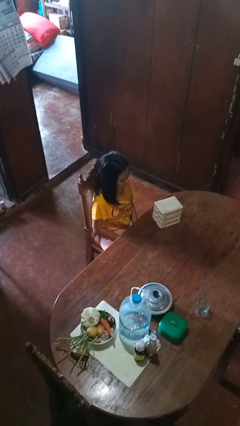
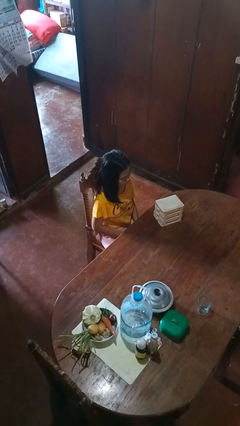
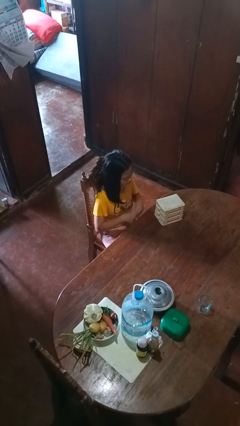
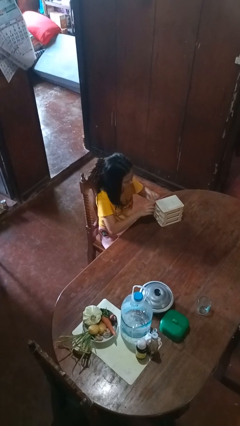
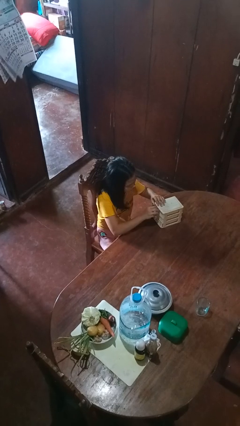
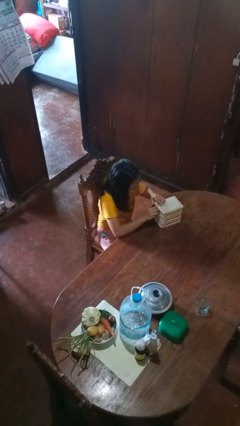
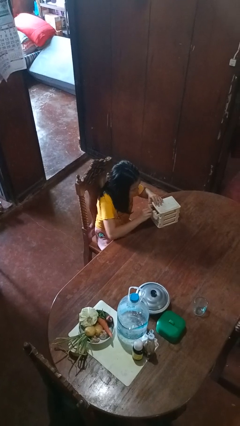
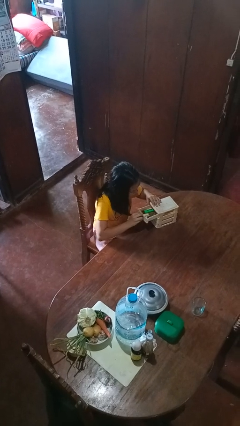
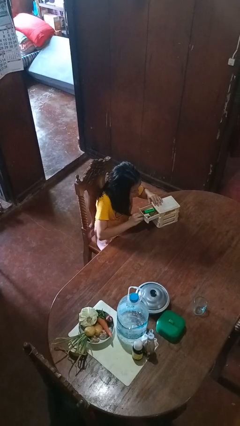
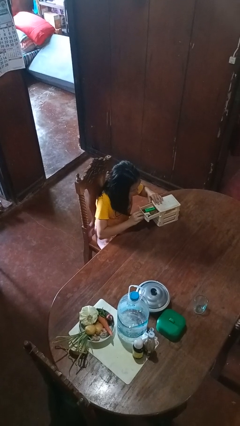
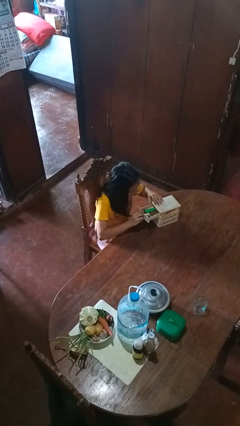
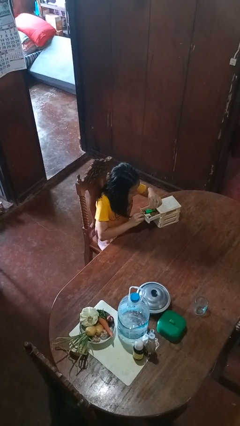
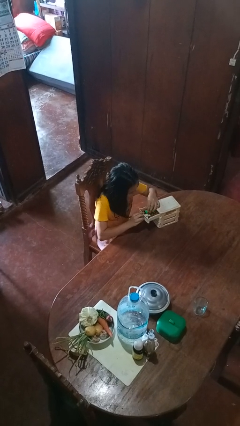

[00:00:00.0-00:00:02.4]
person opens jewelry box

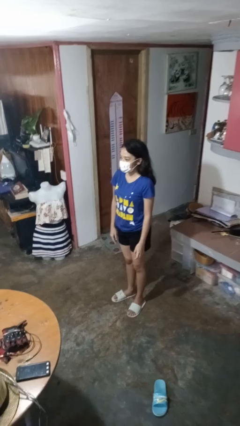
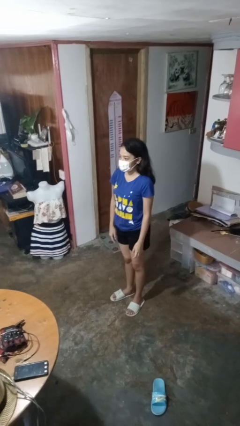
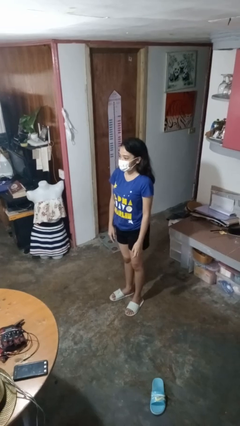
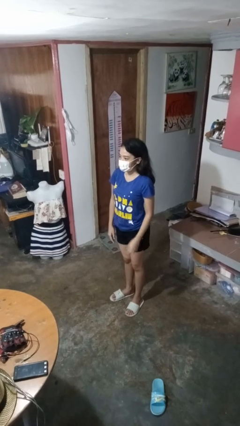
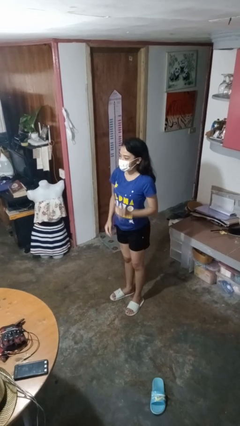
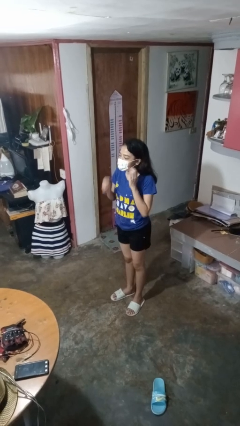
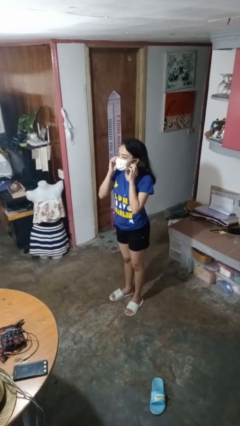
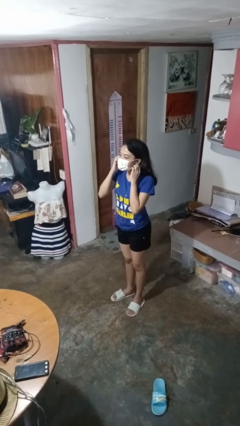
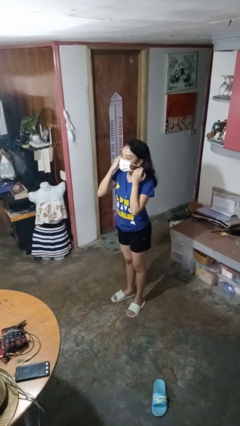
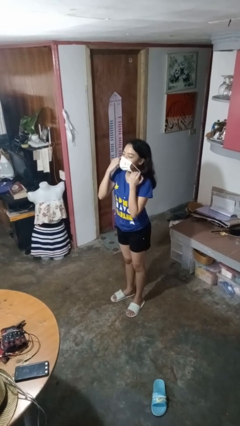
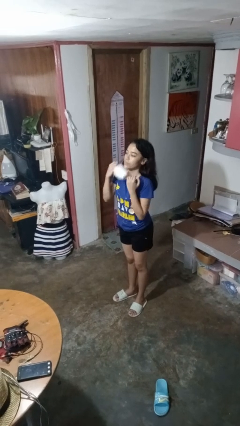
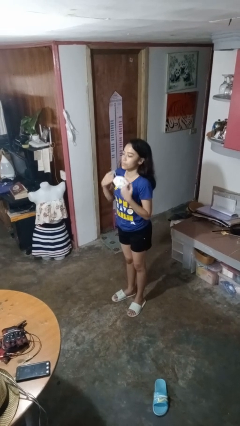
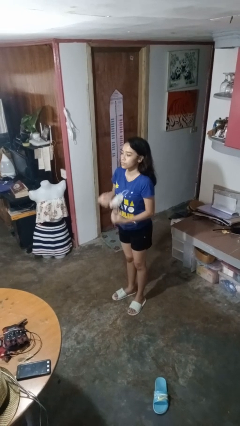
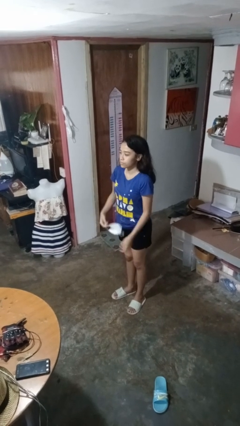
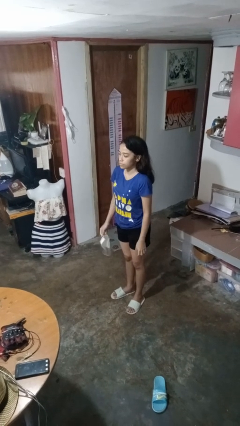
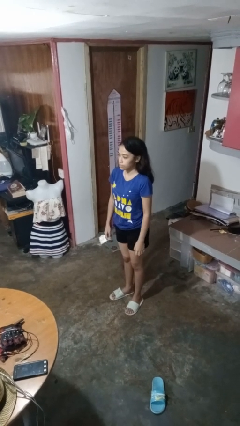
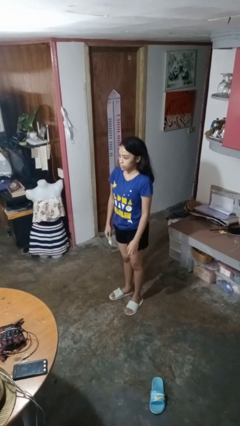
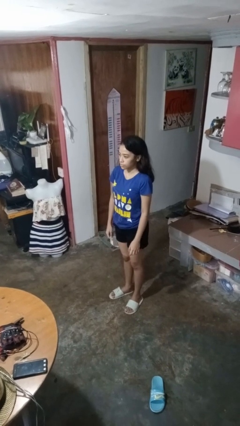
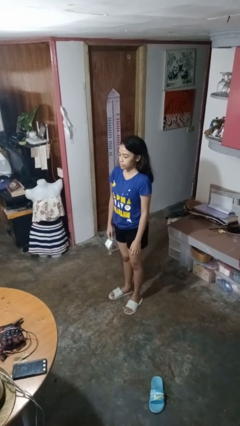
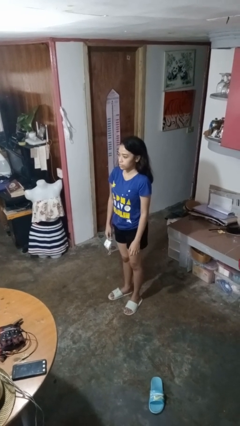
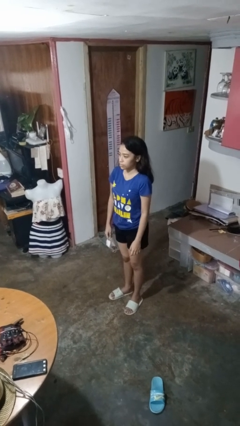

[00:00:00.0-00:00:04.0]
person takes off facemask

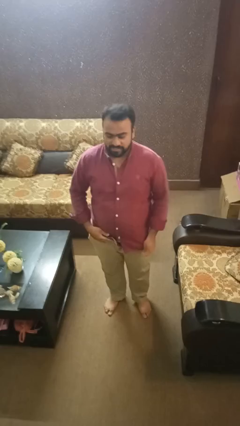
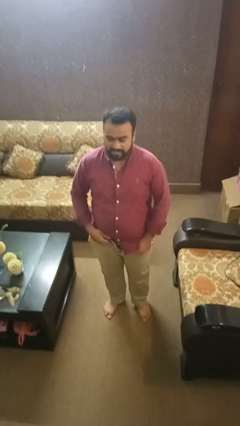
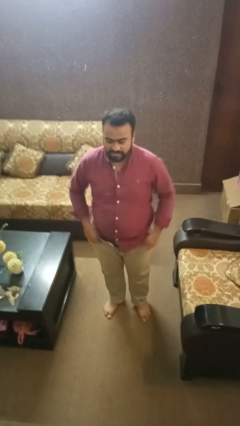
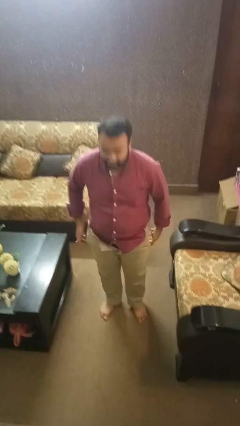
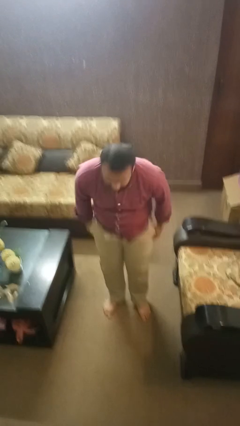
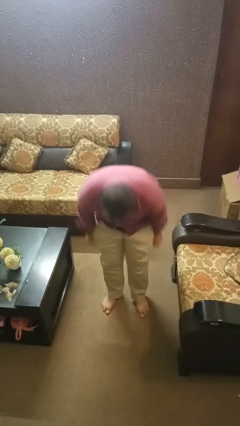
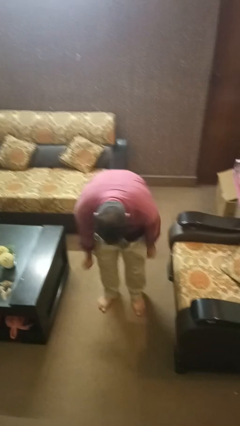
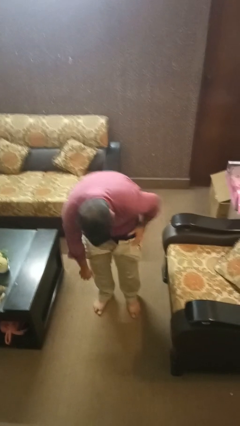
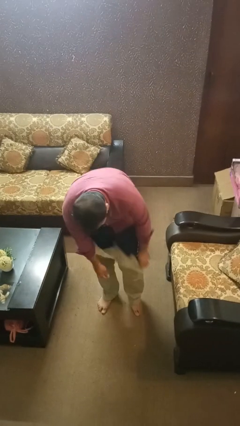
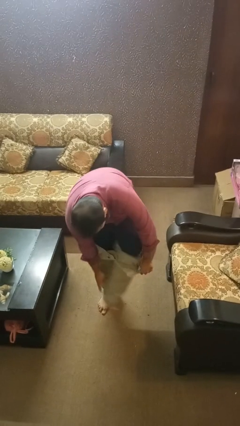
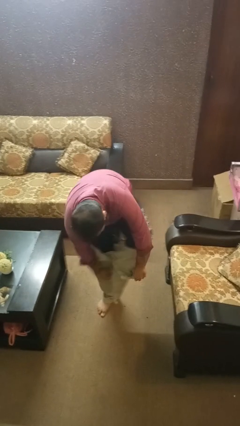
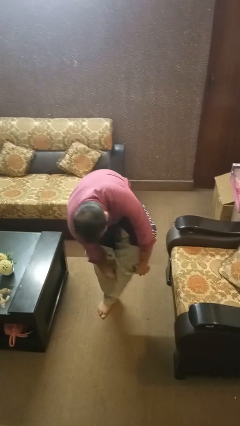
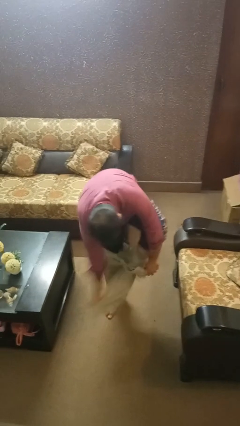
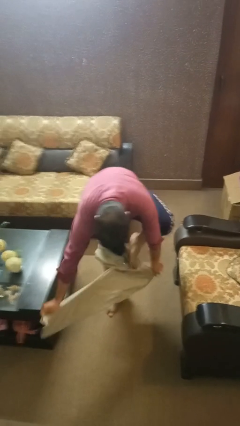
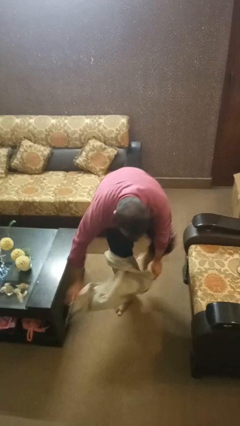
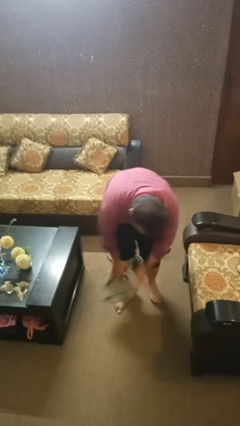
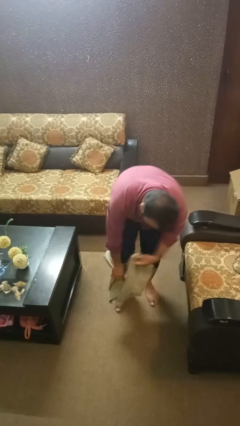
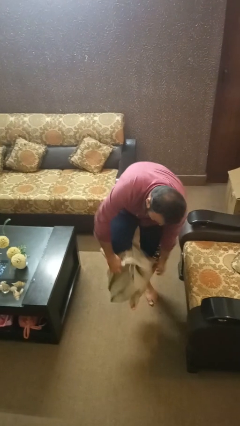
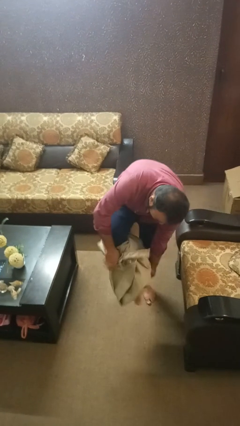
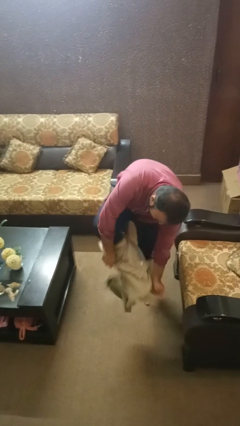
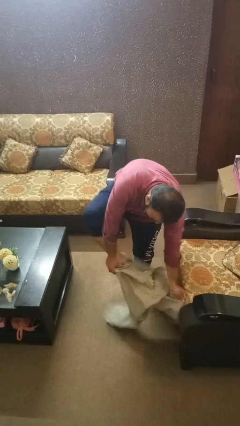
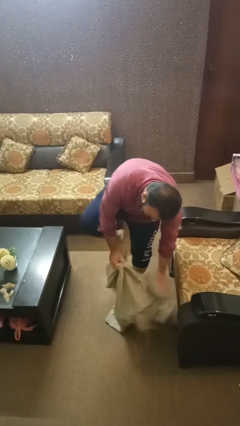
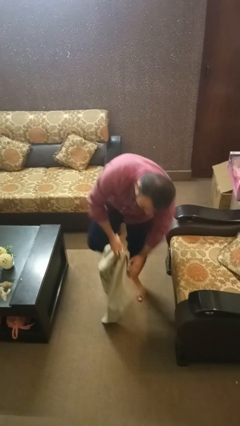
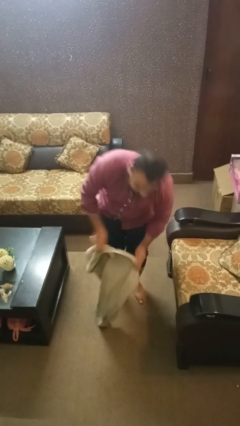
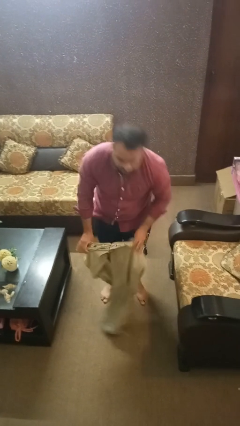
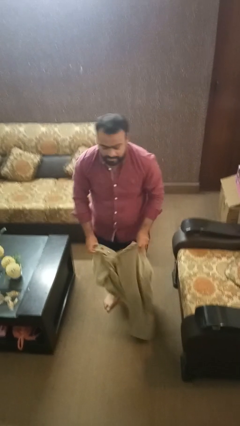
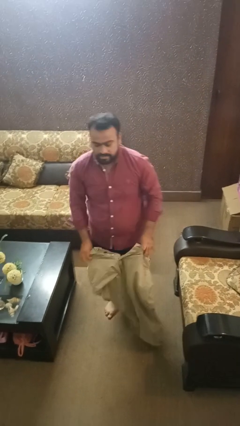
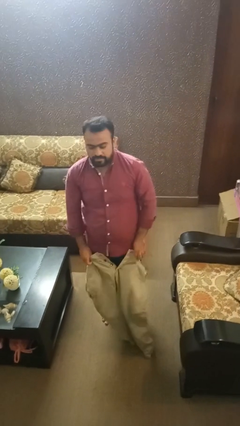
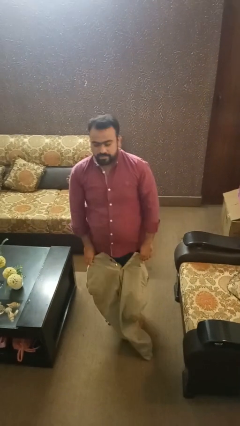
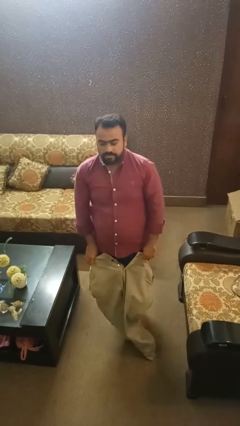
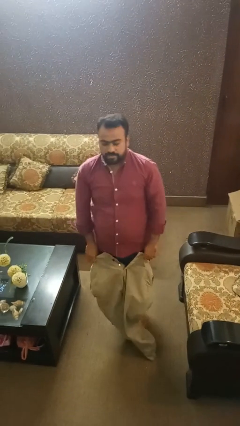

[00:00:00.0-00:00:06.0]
person takes off pants

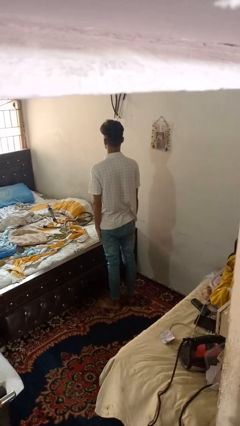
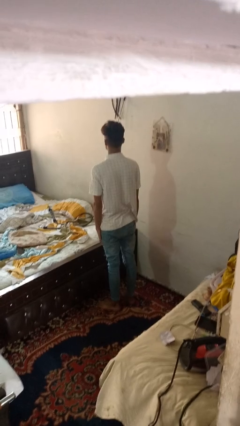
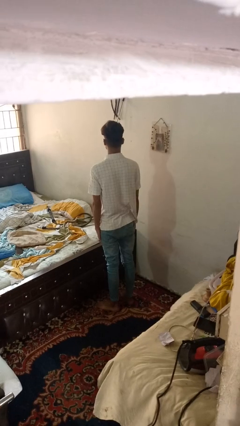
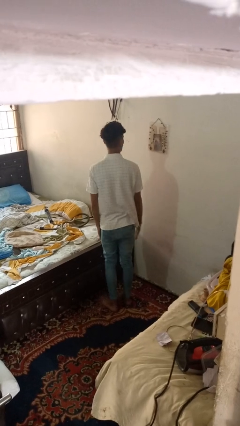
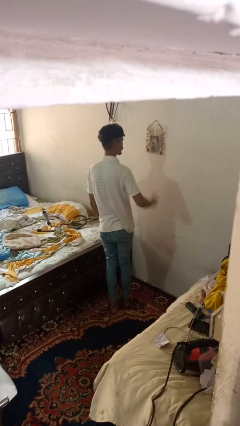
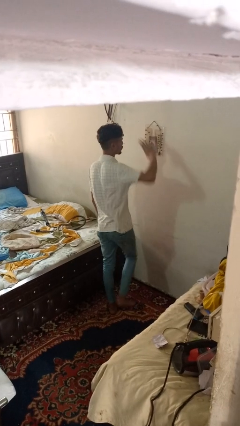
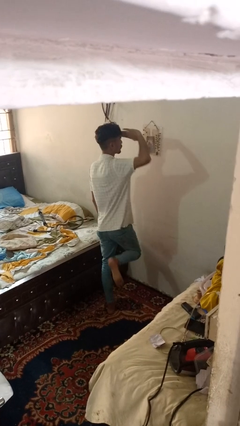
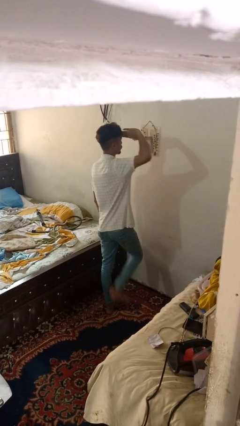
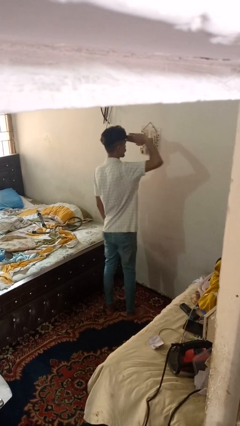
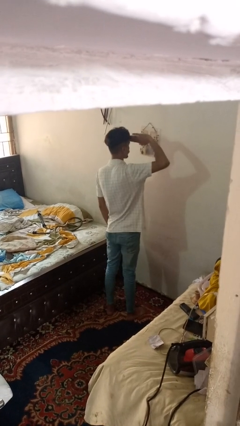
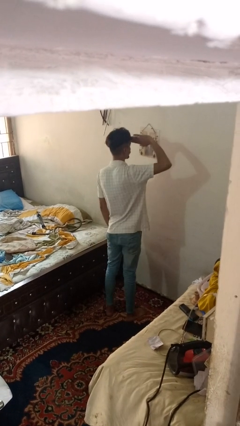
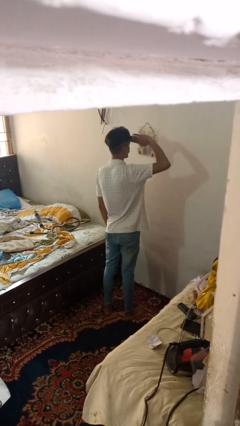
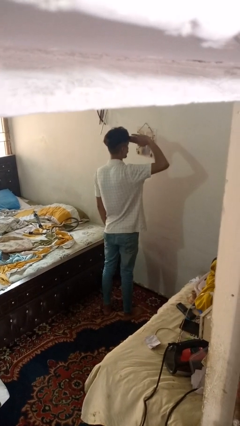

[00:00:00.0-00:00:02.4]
person salutes

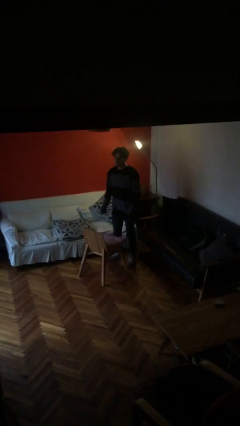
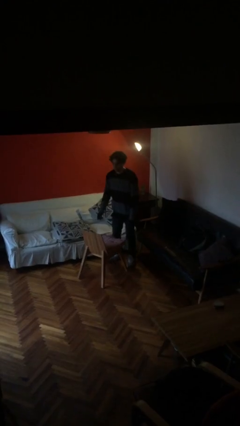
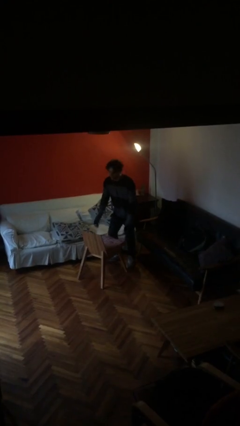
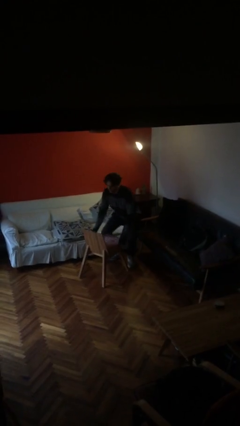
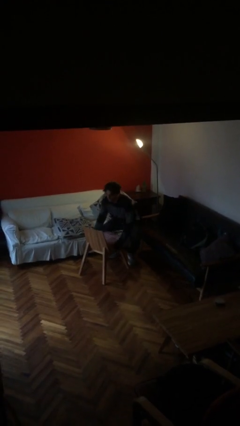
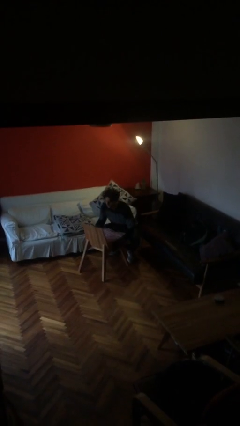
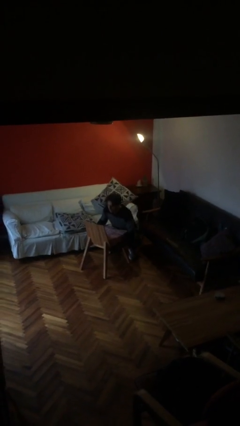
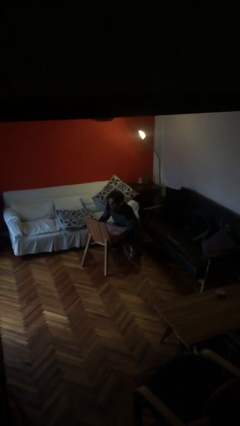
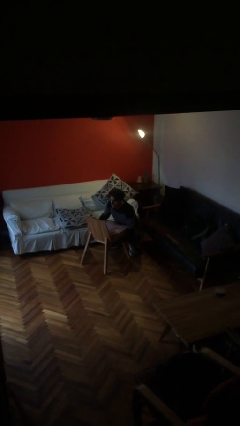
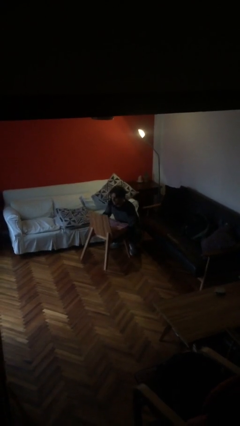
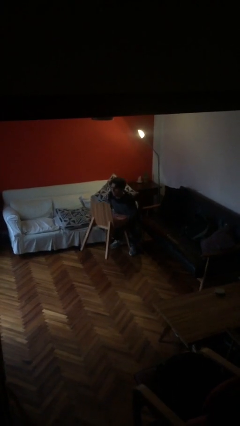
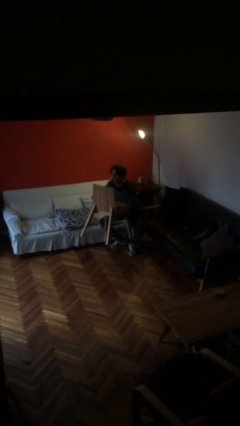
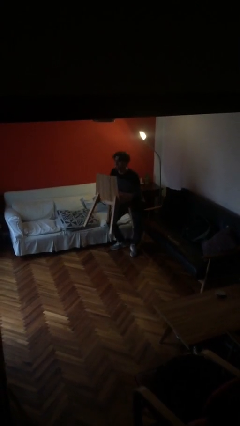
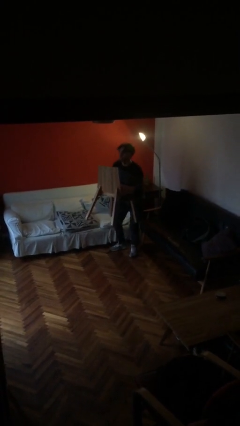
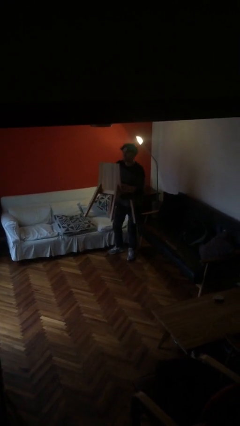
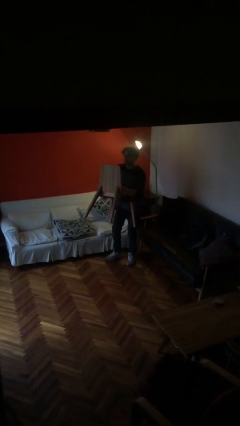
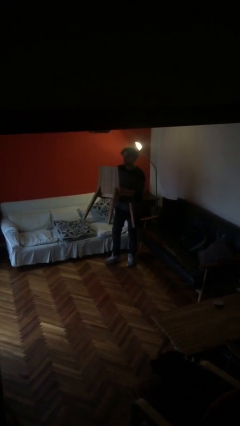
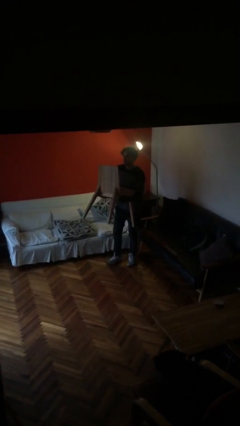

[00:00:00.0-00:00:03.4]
person picks up object from floor
